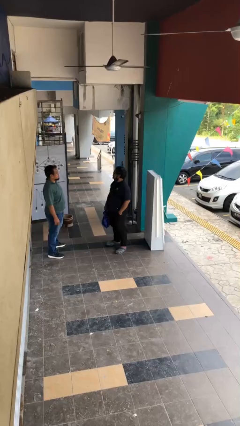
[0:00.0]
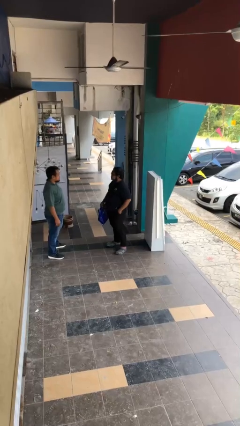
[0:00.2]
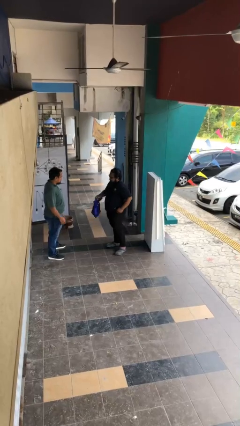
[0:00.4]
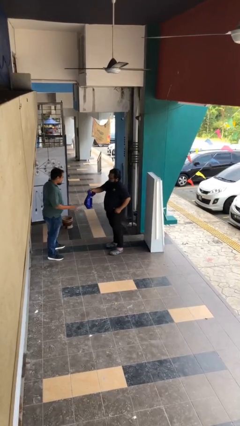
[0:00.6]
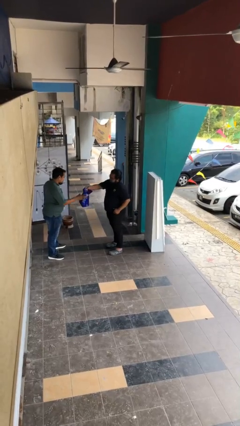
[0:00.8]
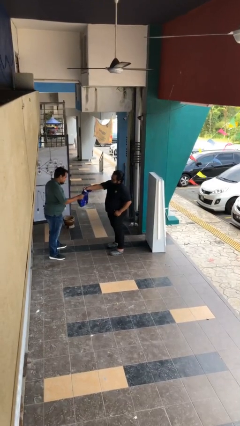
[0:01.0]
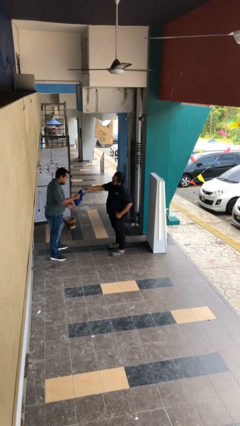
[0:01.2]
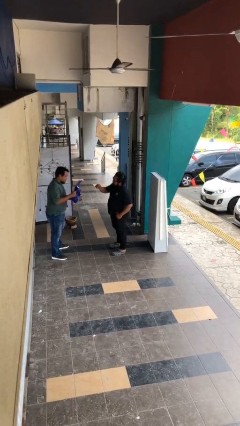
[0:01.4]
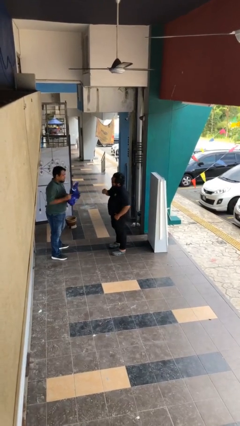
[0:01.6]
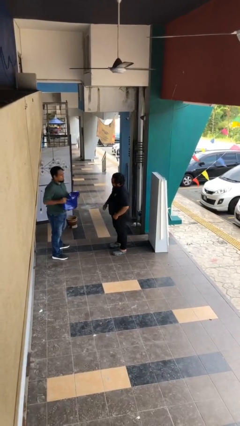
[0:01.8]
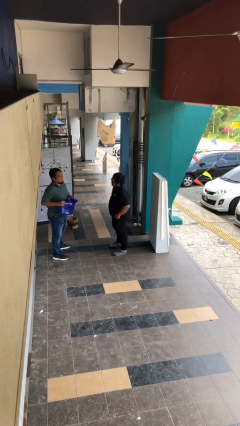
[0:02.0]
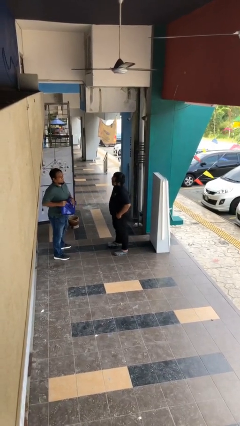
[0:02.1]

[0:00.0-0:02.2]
person transfers object to person

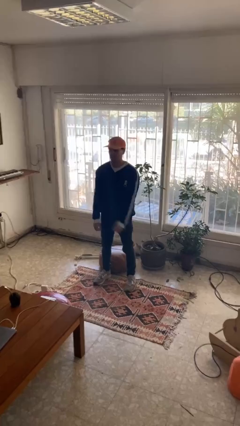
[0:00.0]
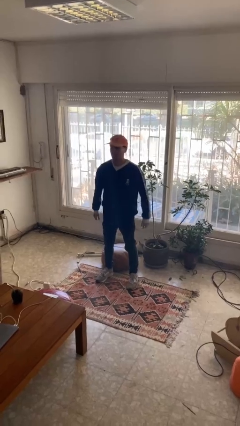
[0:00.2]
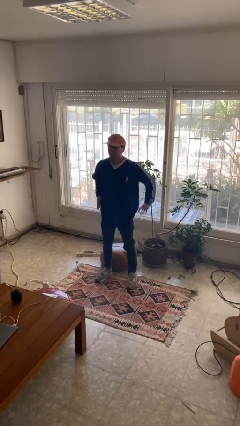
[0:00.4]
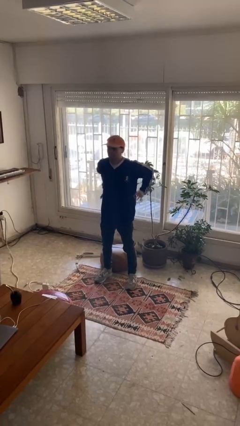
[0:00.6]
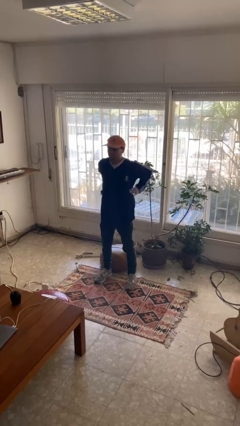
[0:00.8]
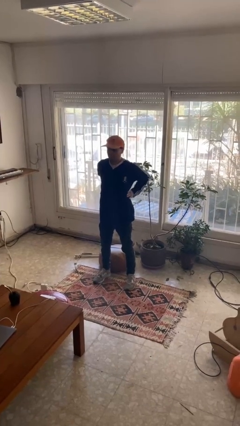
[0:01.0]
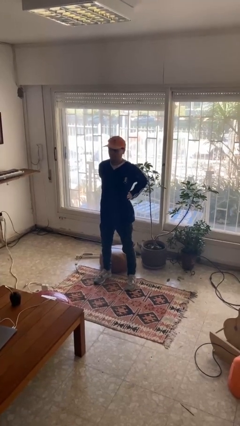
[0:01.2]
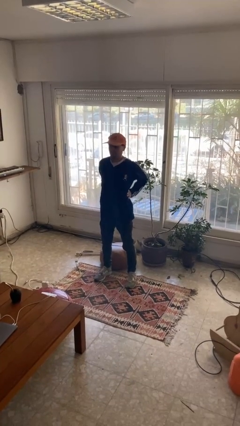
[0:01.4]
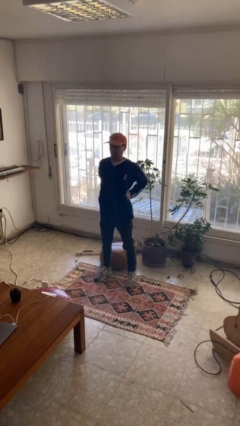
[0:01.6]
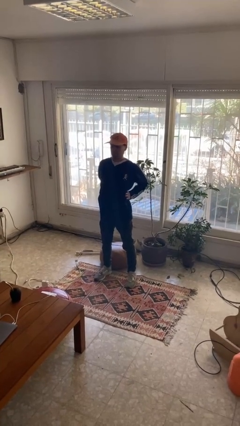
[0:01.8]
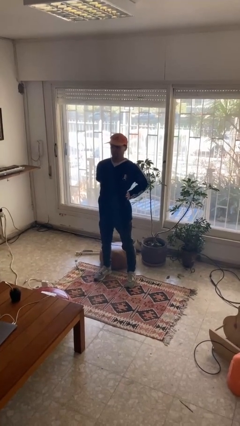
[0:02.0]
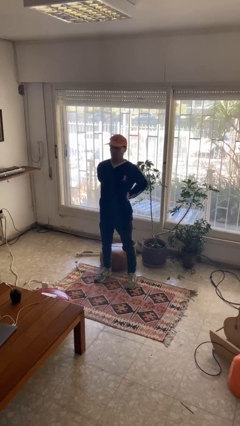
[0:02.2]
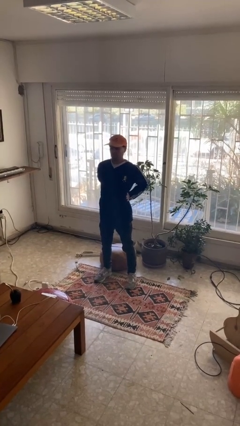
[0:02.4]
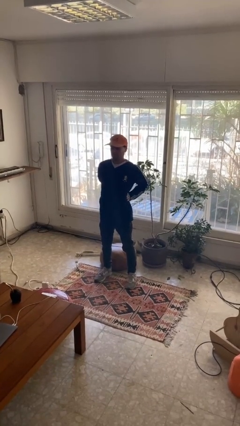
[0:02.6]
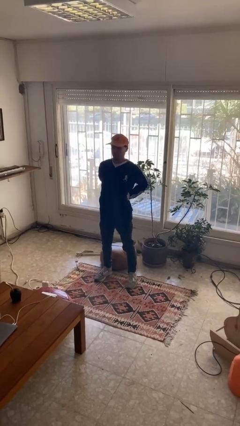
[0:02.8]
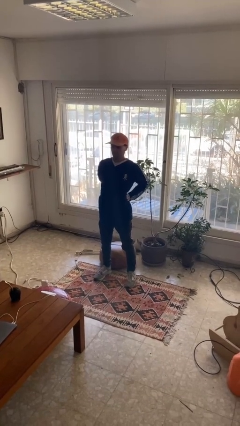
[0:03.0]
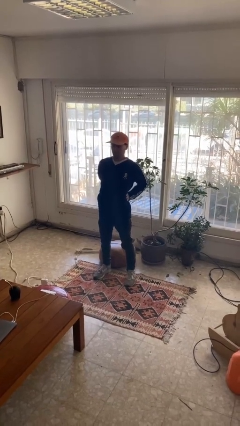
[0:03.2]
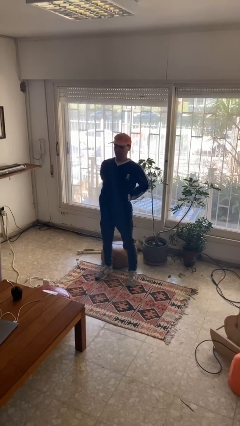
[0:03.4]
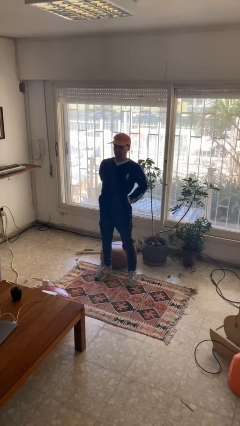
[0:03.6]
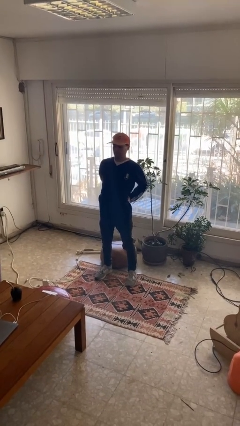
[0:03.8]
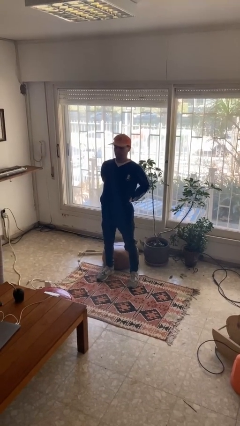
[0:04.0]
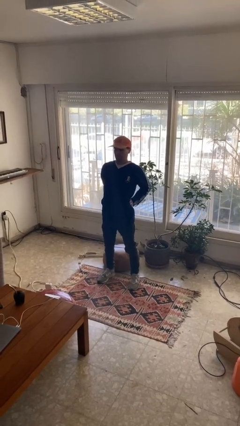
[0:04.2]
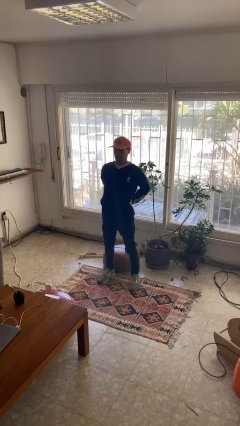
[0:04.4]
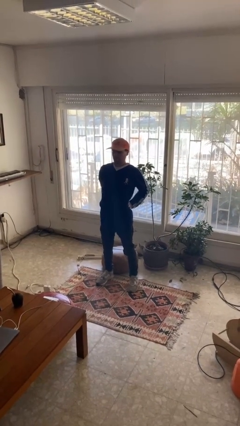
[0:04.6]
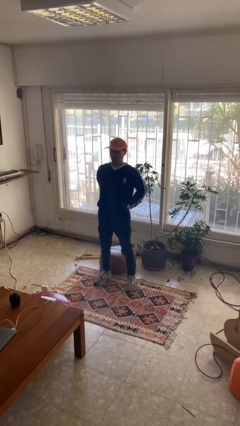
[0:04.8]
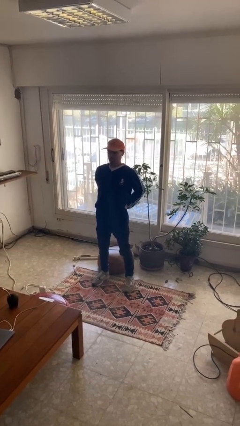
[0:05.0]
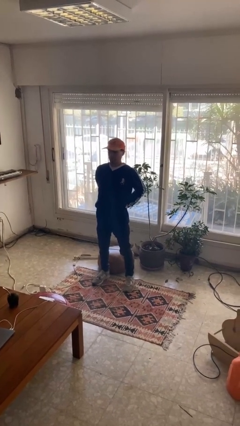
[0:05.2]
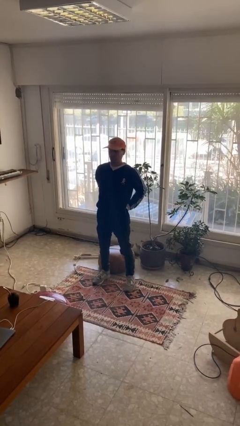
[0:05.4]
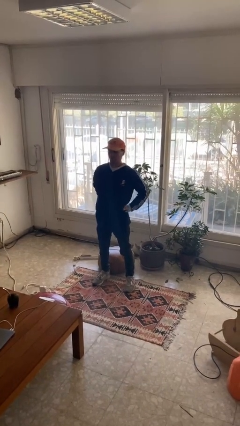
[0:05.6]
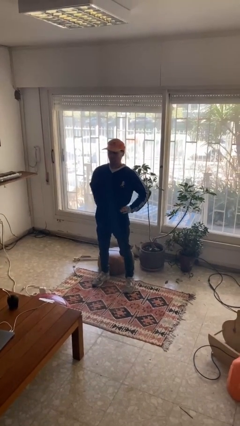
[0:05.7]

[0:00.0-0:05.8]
person stretches back

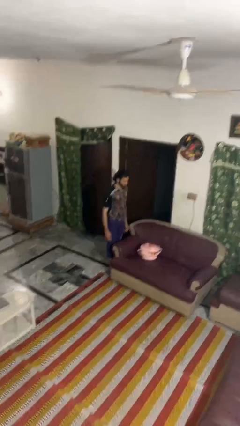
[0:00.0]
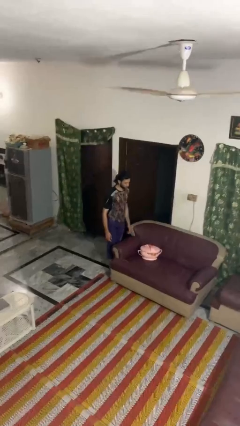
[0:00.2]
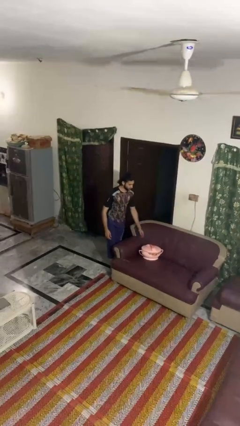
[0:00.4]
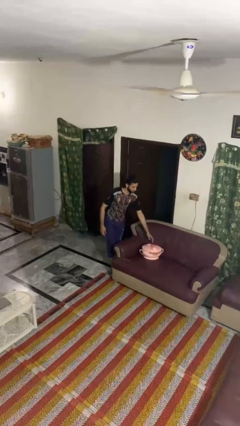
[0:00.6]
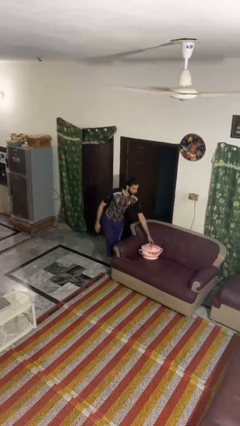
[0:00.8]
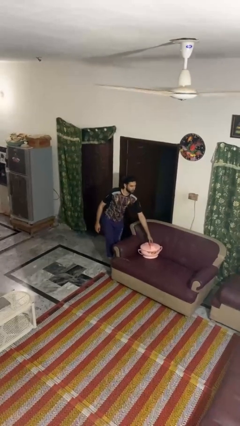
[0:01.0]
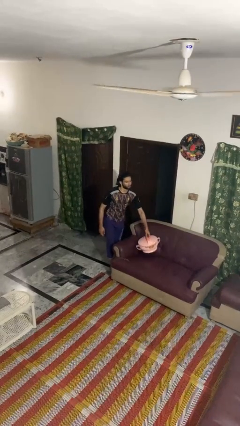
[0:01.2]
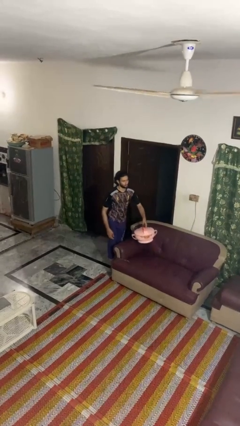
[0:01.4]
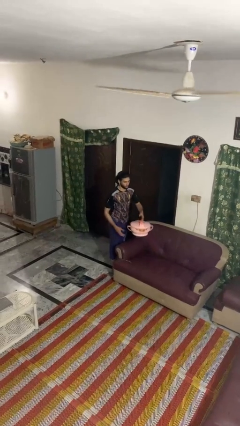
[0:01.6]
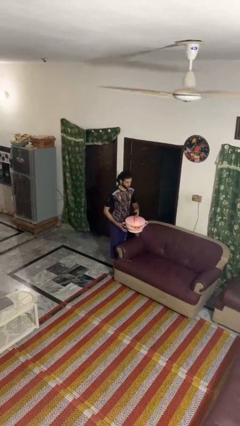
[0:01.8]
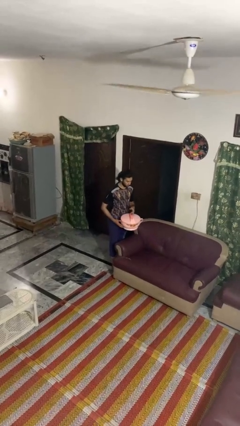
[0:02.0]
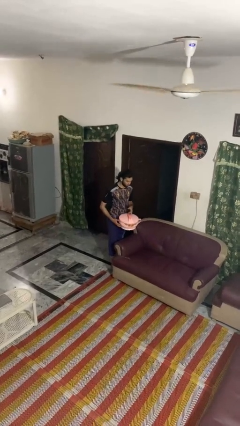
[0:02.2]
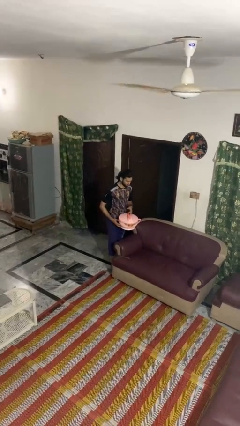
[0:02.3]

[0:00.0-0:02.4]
person picks up object from couch

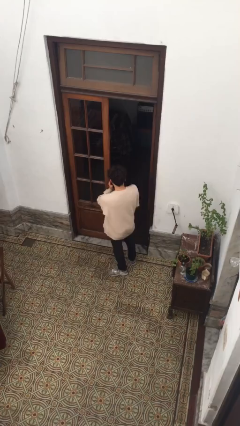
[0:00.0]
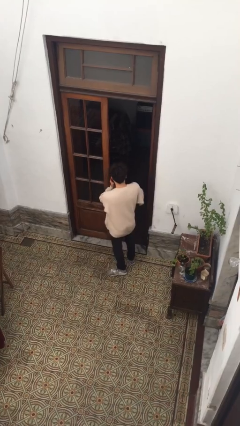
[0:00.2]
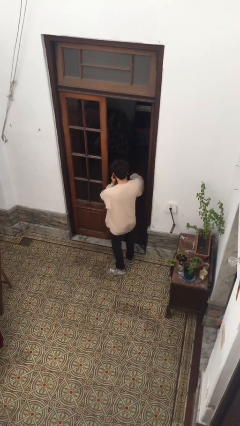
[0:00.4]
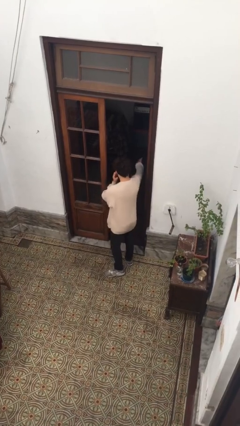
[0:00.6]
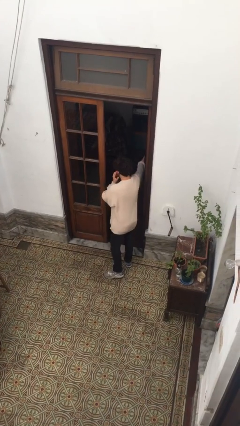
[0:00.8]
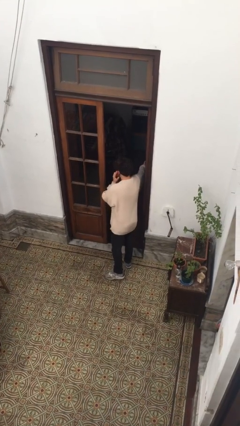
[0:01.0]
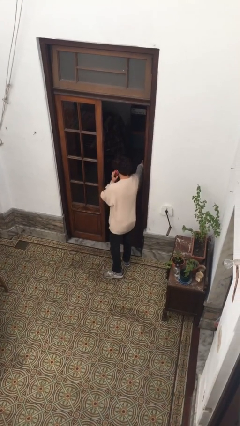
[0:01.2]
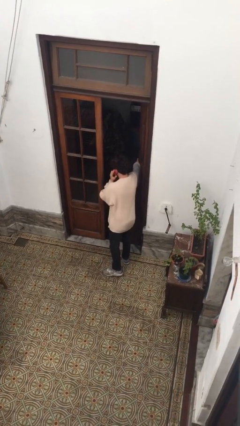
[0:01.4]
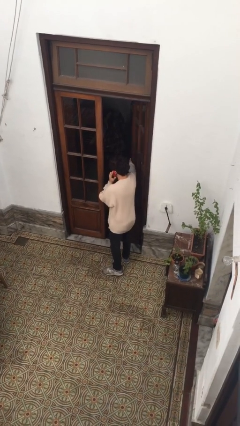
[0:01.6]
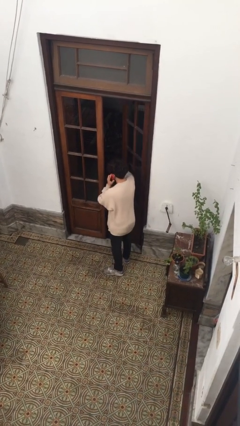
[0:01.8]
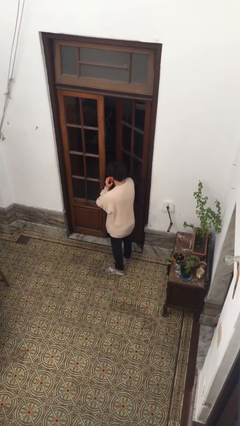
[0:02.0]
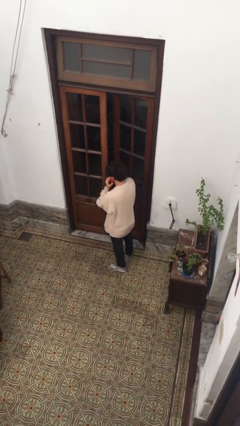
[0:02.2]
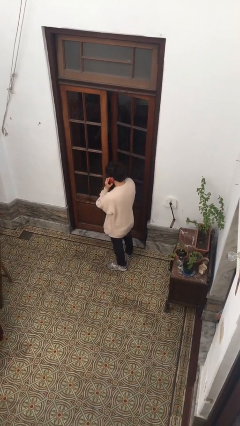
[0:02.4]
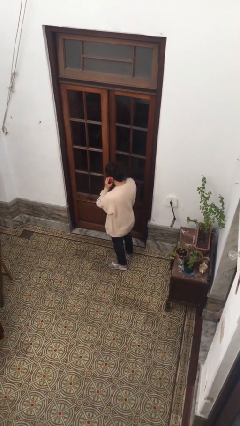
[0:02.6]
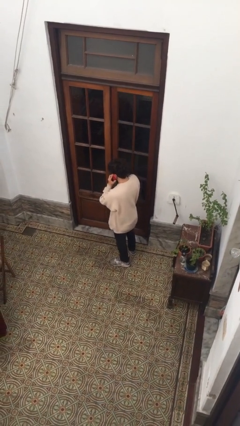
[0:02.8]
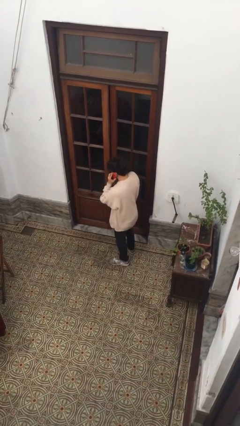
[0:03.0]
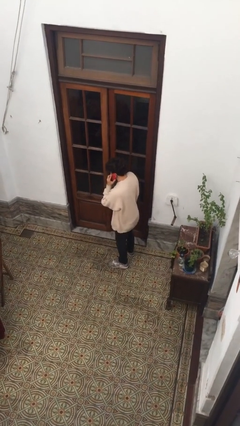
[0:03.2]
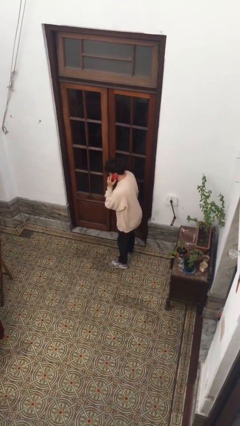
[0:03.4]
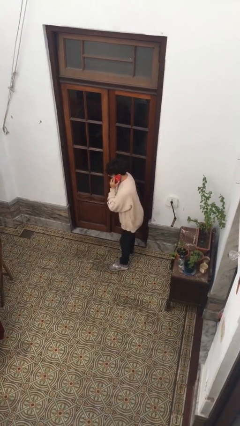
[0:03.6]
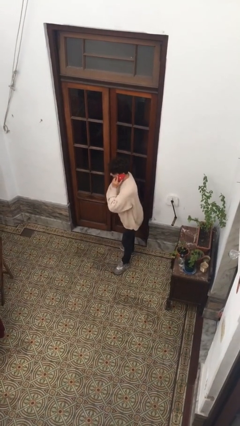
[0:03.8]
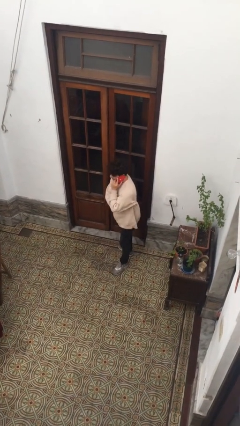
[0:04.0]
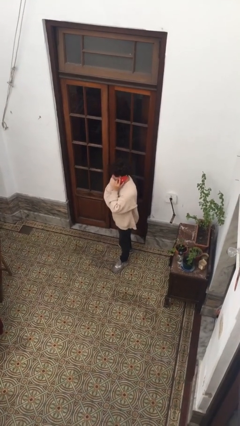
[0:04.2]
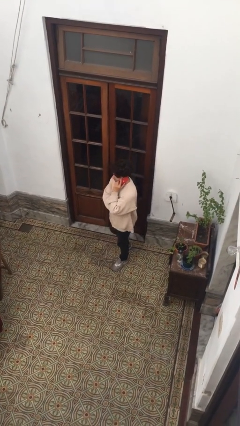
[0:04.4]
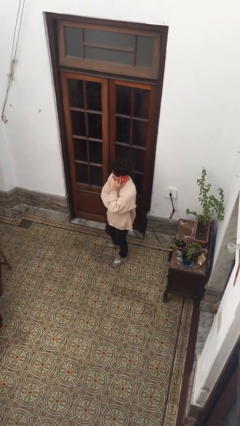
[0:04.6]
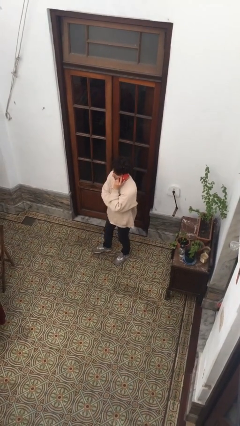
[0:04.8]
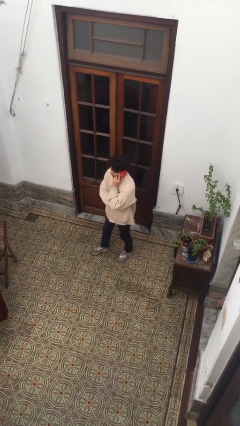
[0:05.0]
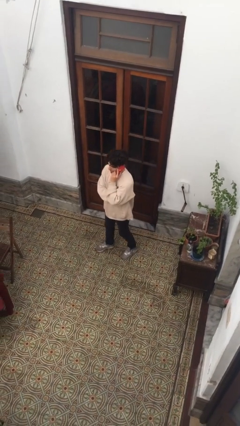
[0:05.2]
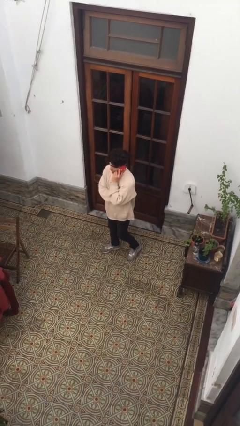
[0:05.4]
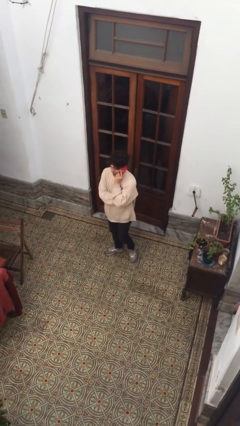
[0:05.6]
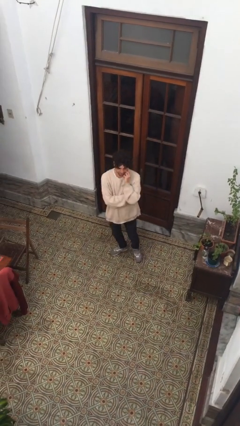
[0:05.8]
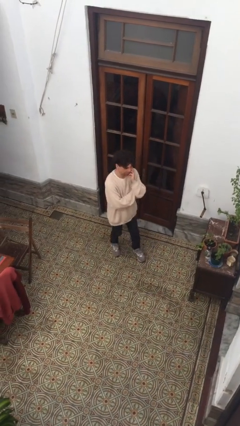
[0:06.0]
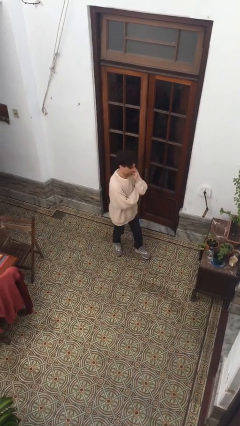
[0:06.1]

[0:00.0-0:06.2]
person closes facility door

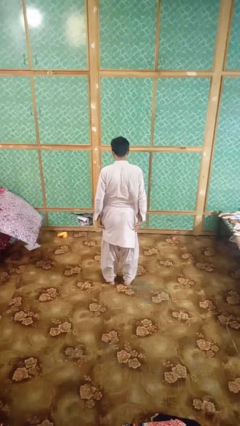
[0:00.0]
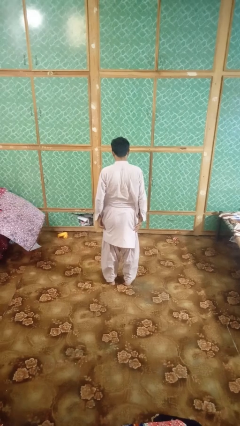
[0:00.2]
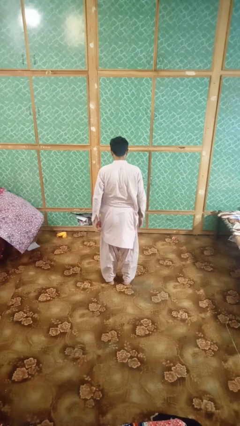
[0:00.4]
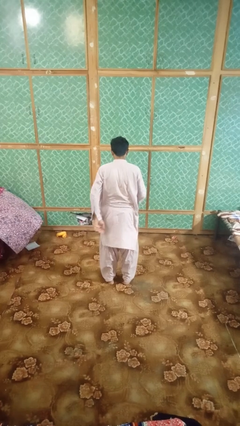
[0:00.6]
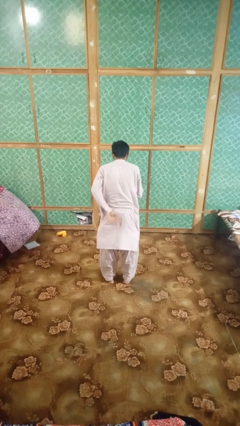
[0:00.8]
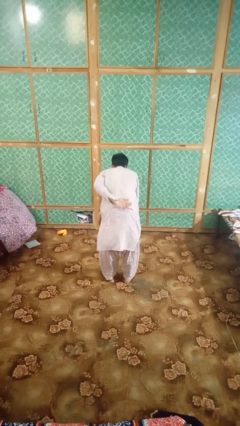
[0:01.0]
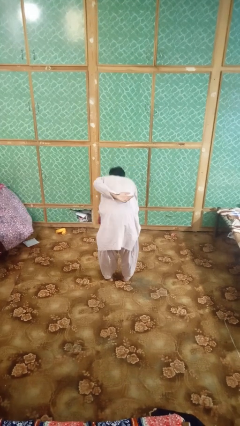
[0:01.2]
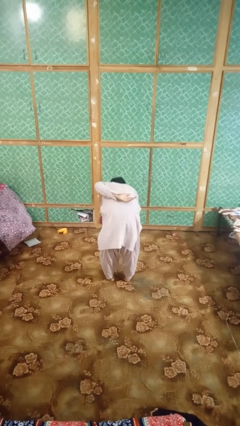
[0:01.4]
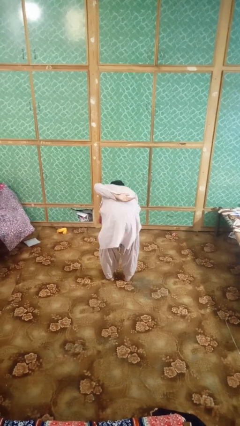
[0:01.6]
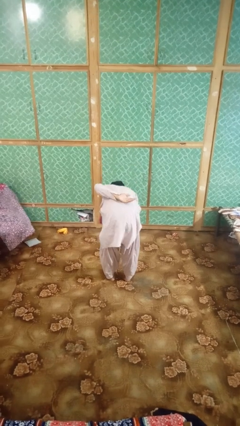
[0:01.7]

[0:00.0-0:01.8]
person bows
